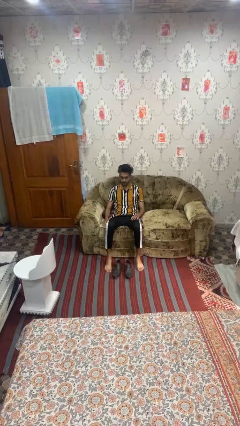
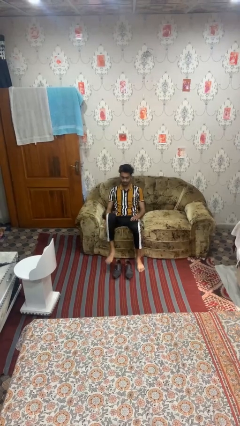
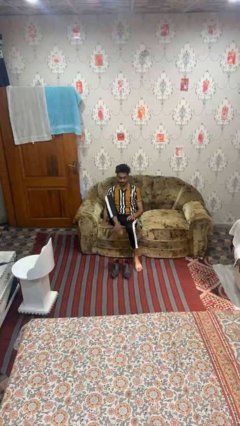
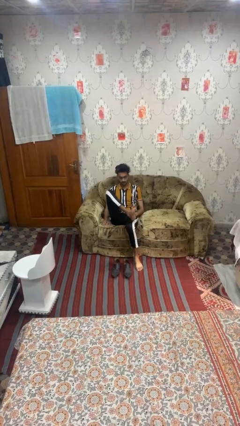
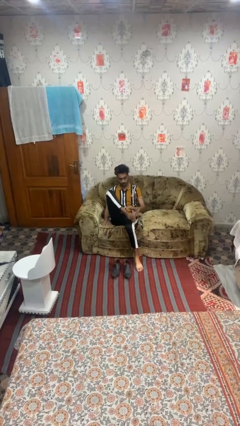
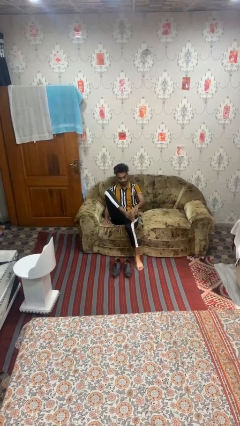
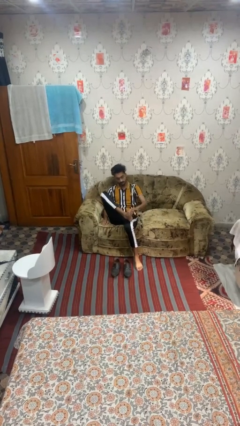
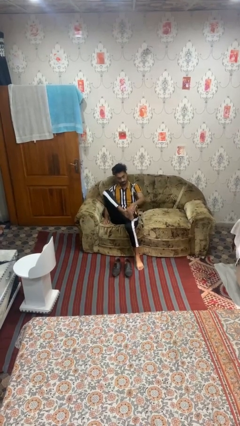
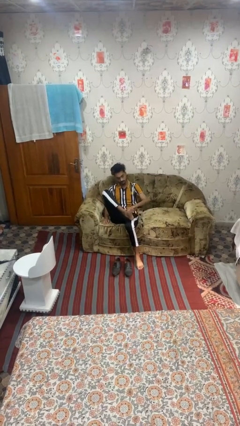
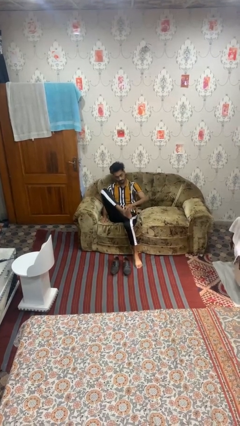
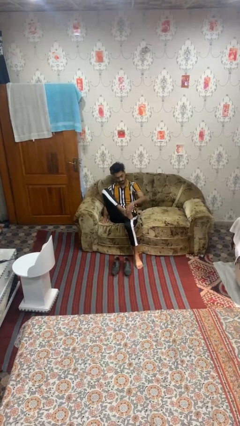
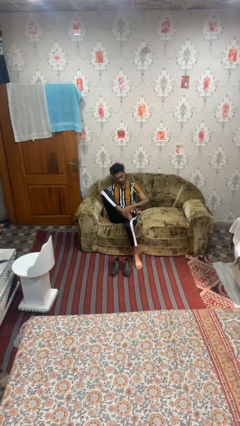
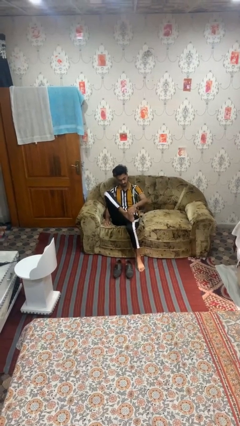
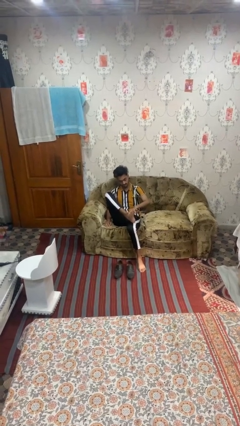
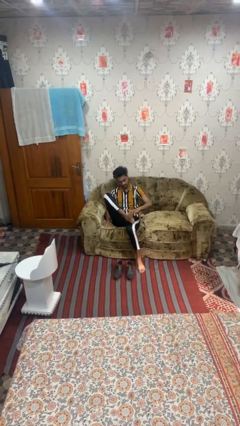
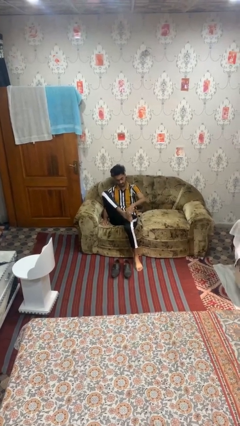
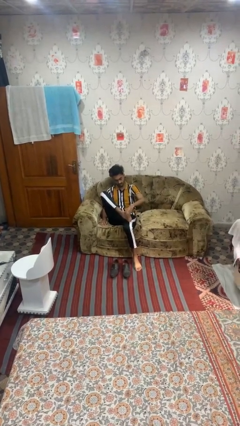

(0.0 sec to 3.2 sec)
person rubs foot

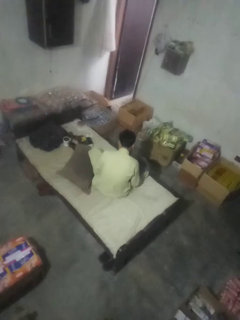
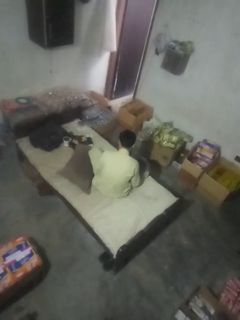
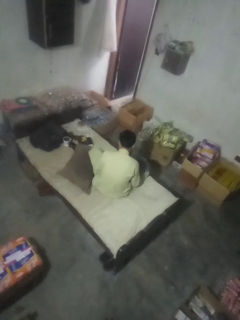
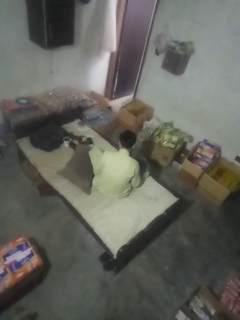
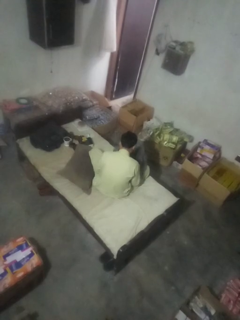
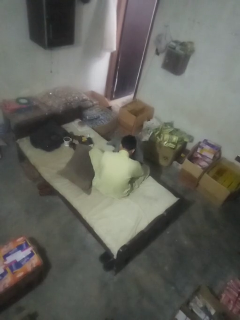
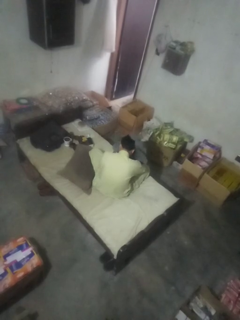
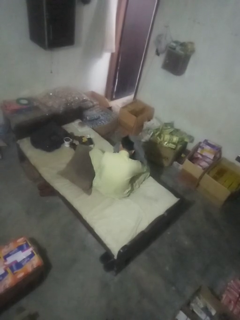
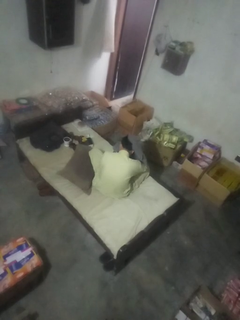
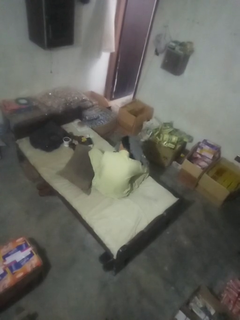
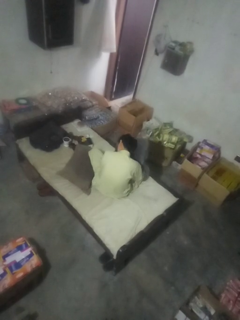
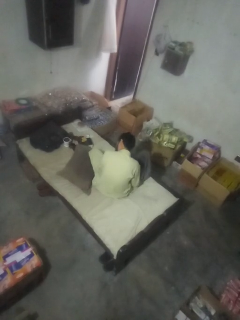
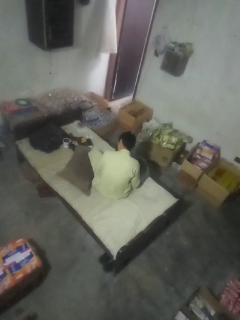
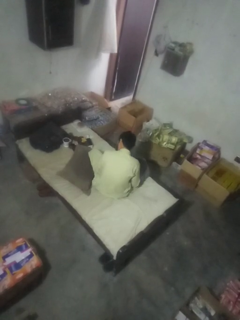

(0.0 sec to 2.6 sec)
person dries hair with towel

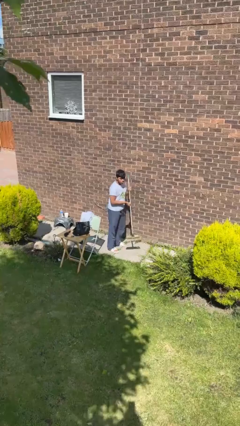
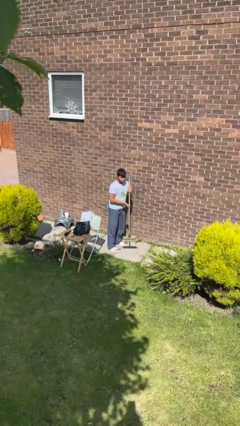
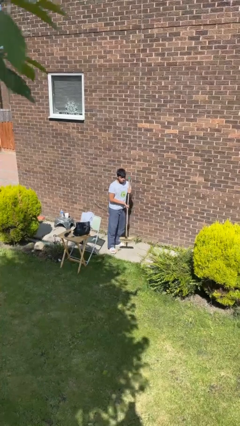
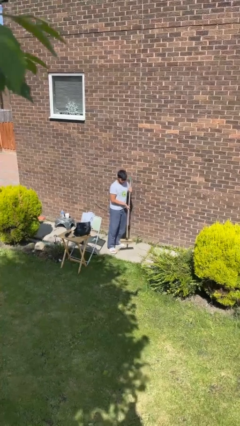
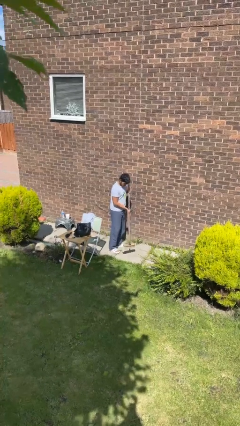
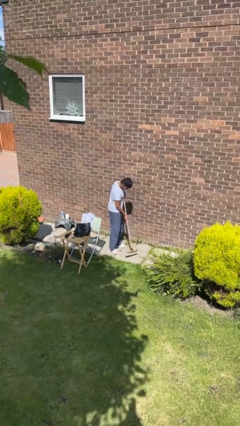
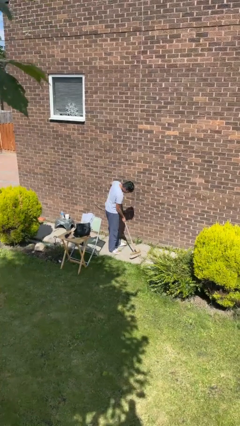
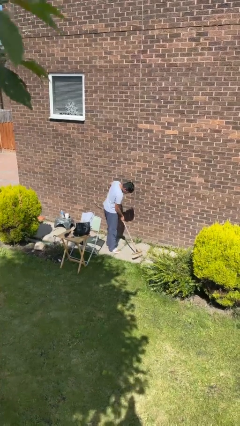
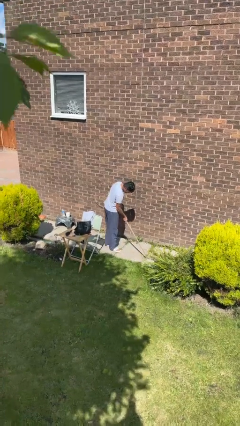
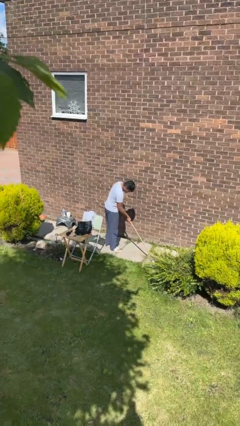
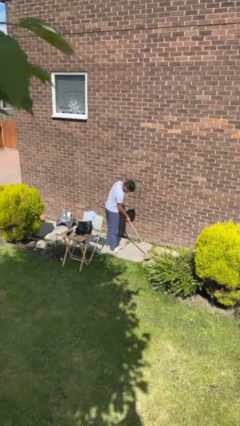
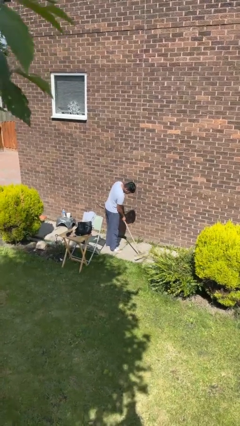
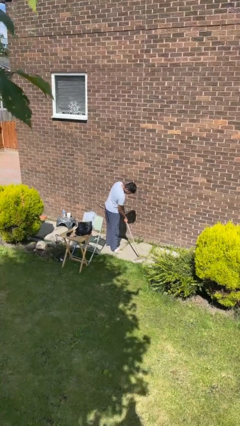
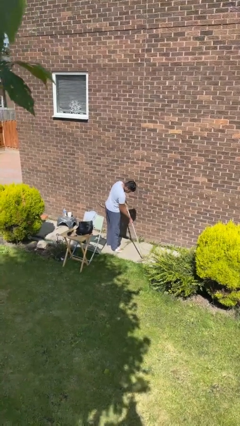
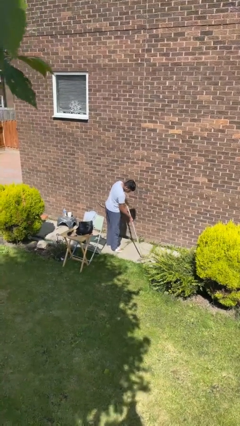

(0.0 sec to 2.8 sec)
person sweeps floor

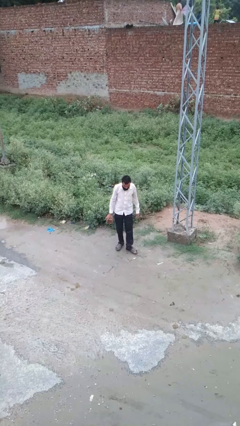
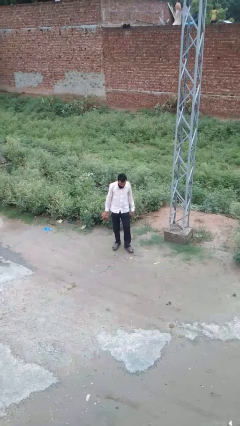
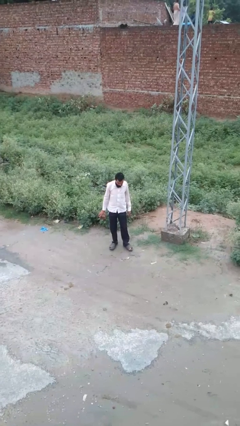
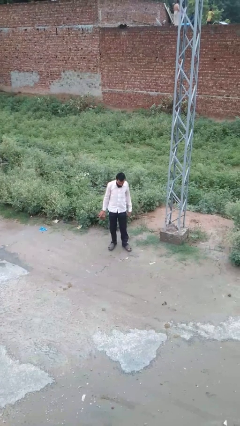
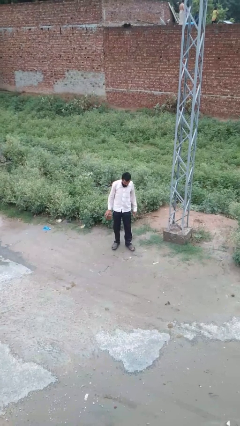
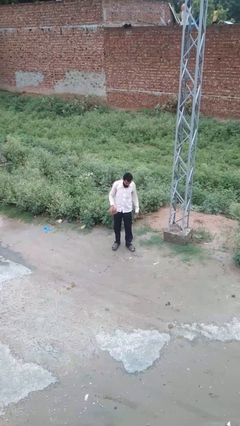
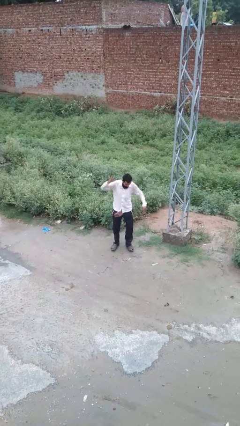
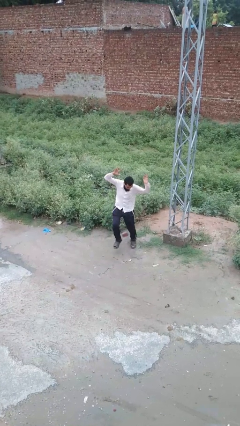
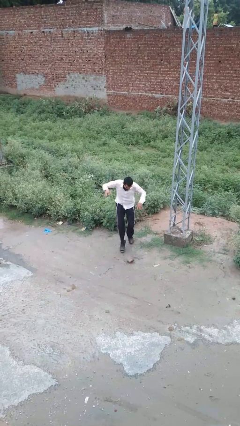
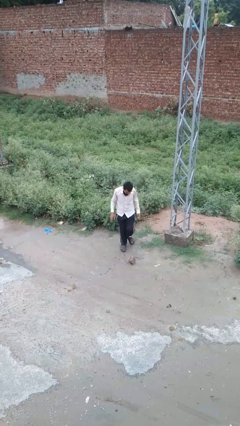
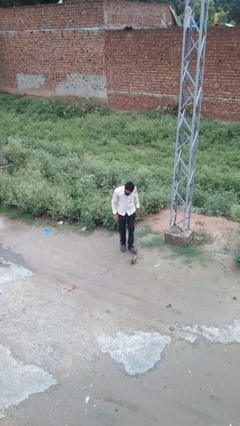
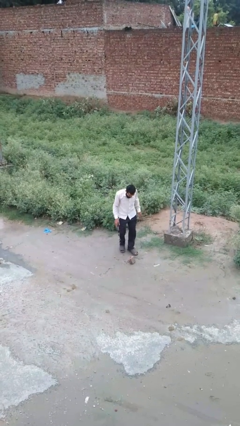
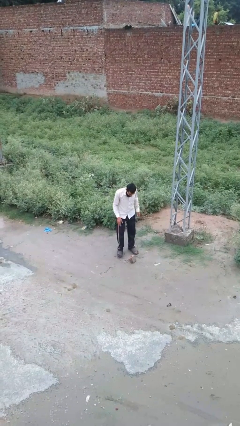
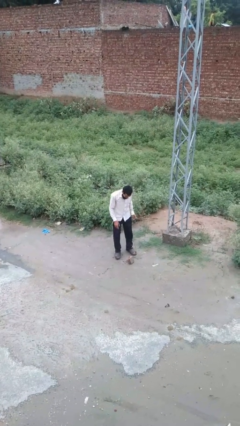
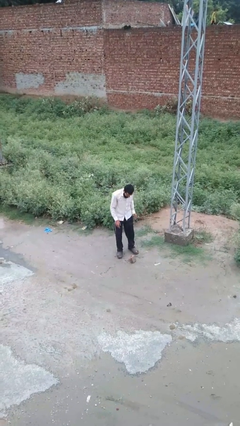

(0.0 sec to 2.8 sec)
person drops object

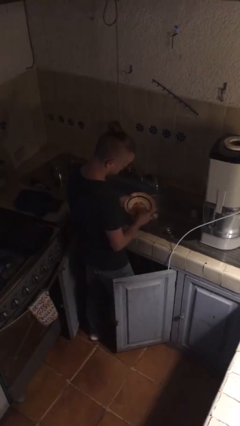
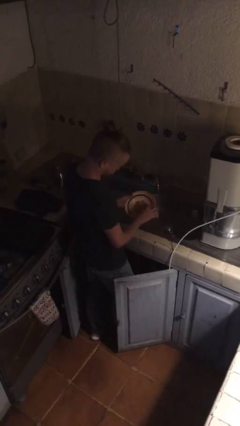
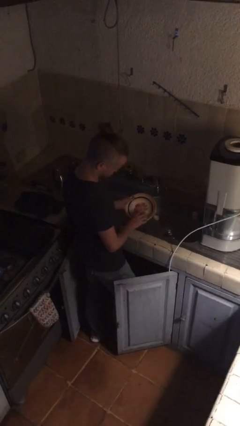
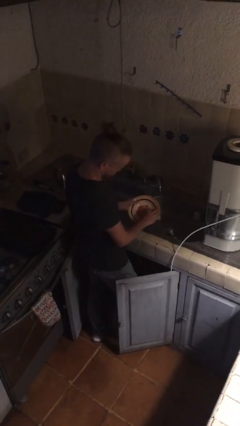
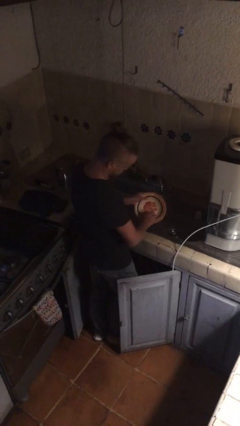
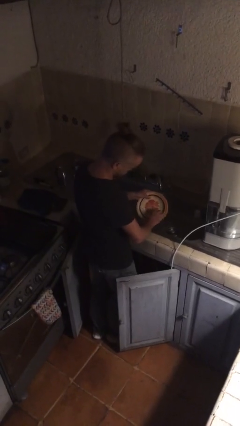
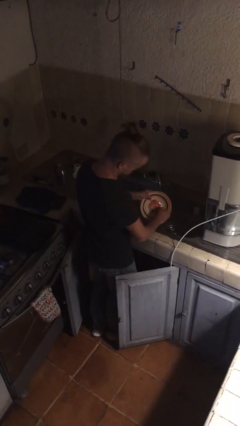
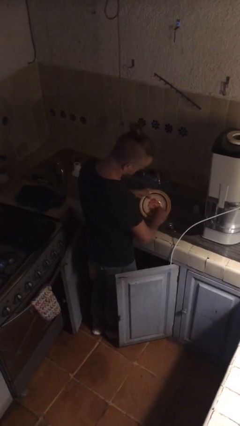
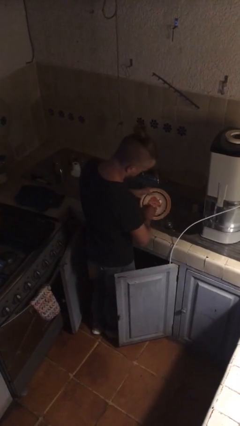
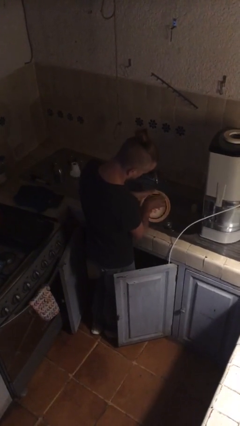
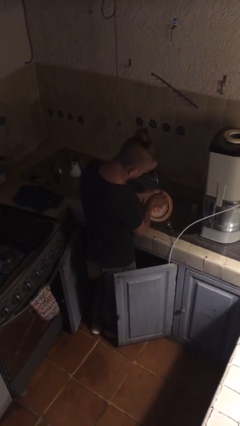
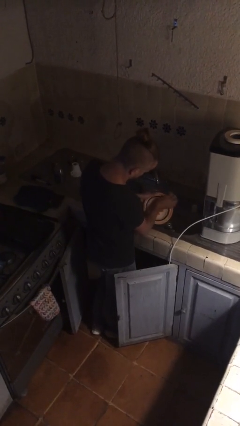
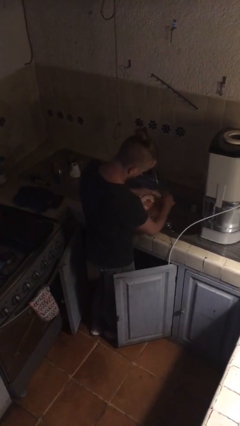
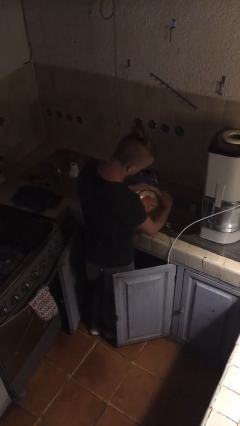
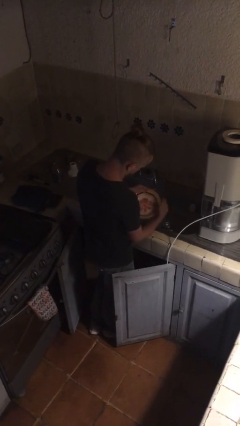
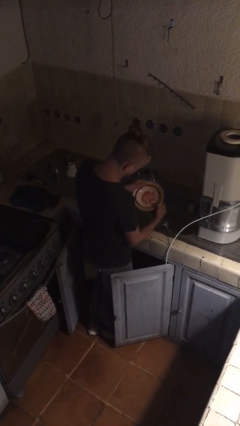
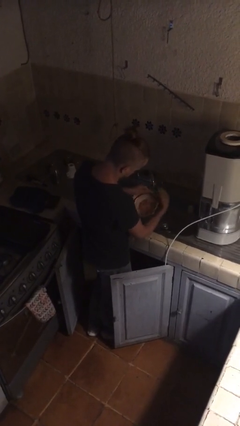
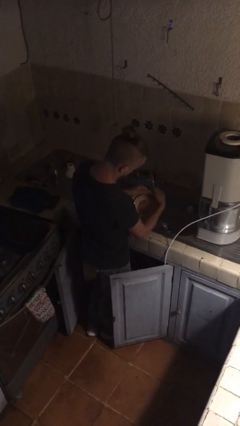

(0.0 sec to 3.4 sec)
person washes dish

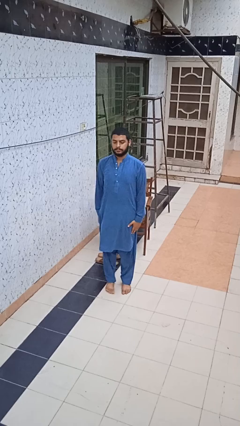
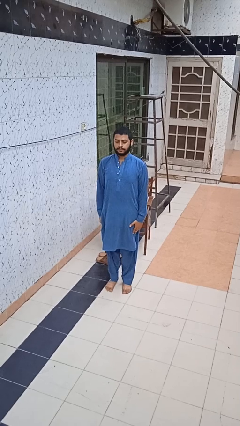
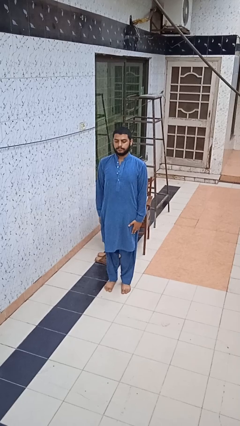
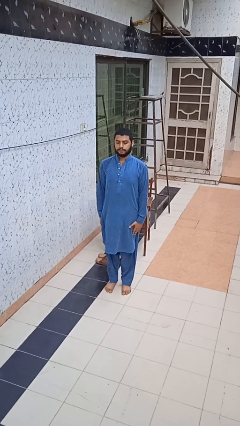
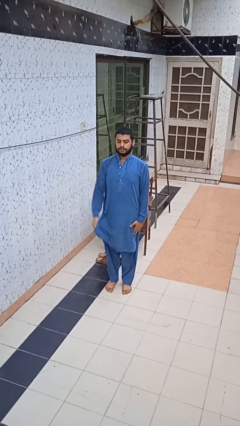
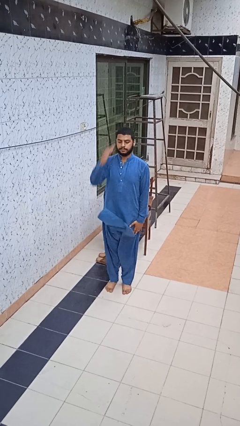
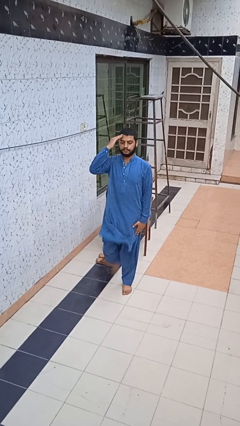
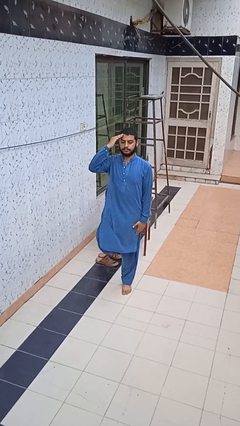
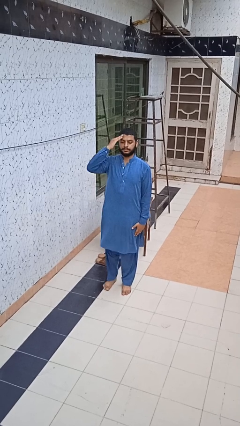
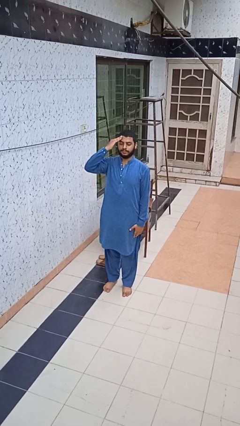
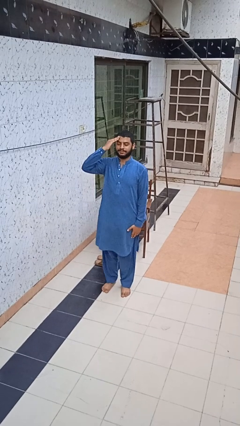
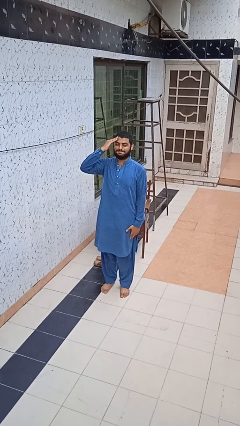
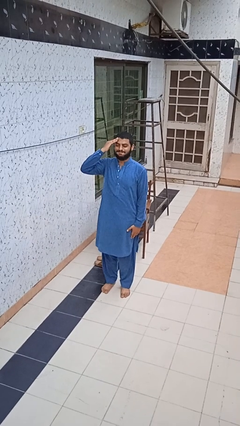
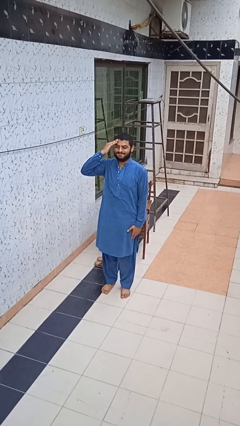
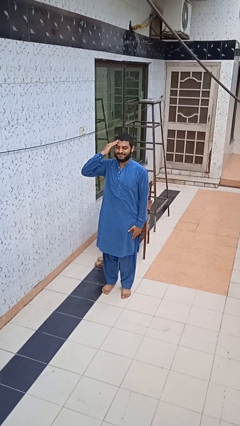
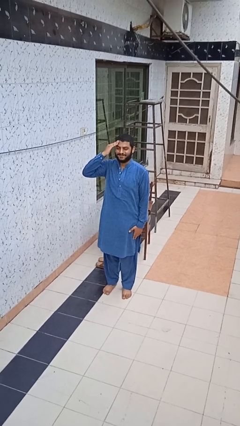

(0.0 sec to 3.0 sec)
person salutes

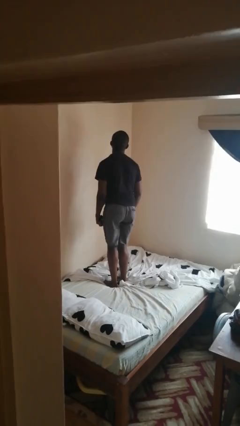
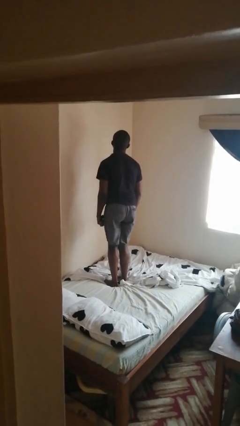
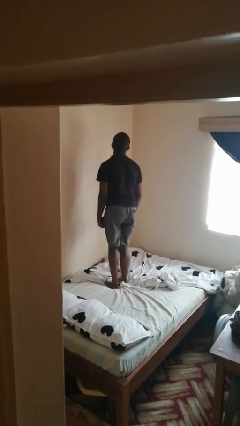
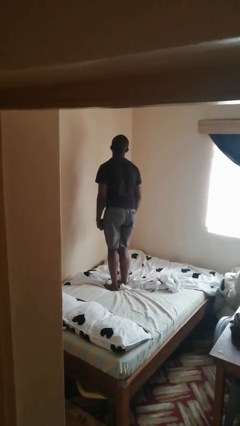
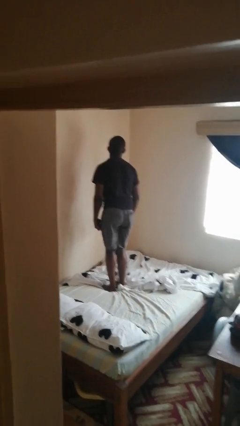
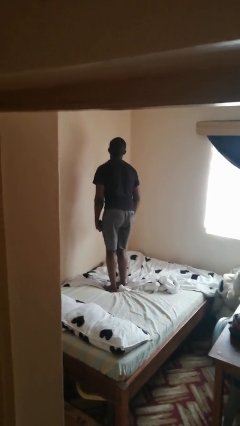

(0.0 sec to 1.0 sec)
person jumps on bed
